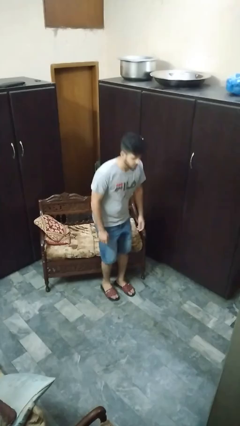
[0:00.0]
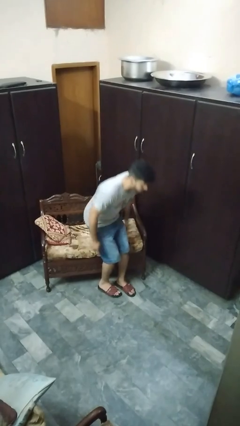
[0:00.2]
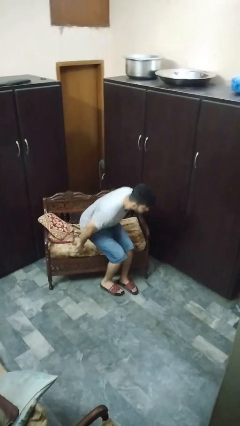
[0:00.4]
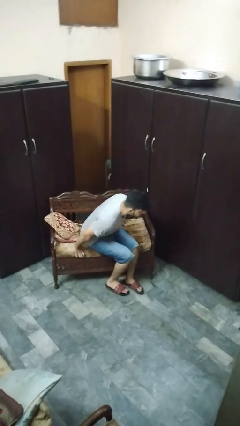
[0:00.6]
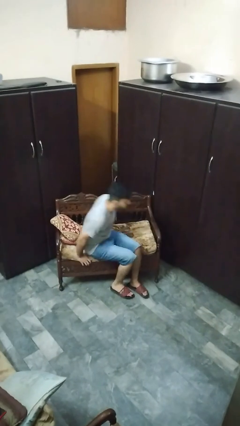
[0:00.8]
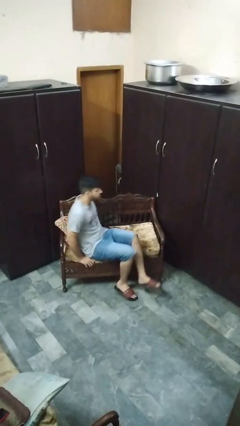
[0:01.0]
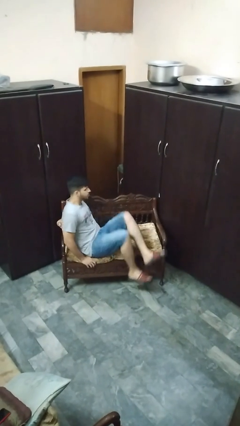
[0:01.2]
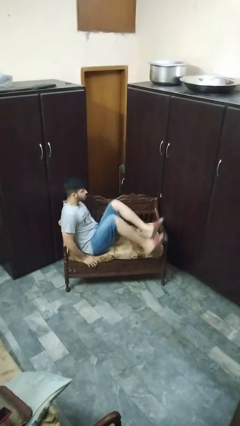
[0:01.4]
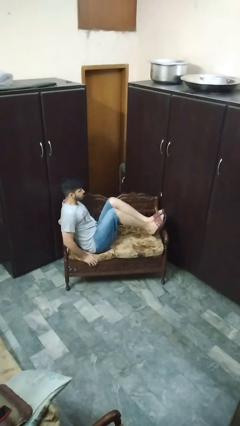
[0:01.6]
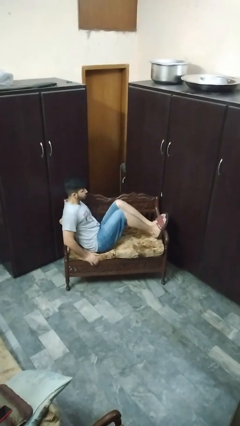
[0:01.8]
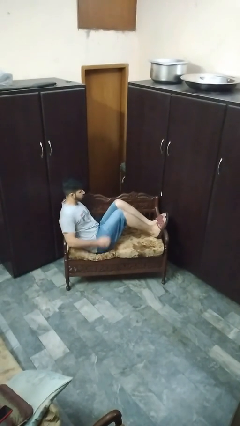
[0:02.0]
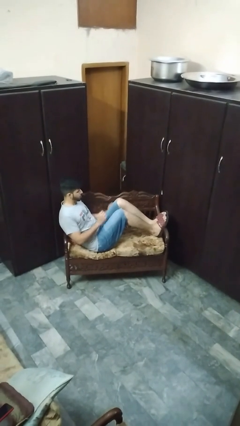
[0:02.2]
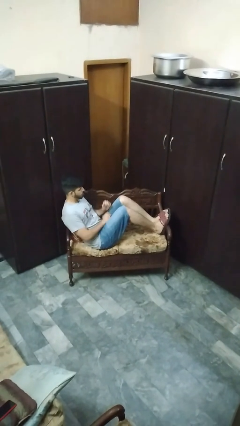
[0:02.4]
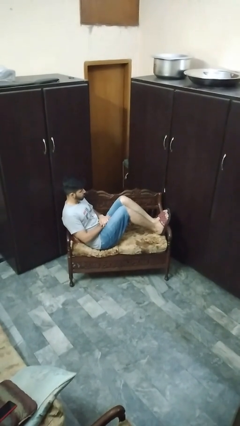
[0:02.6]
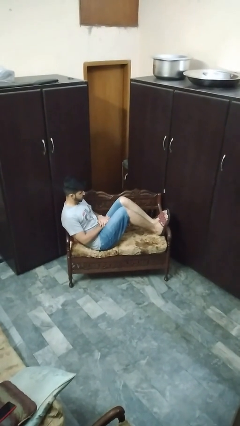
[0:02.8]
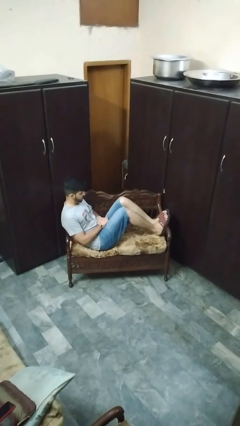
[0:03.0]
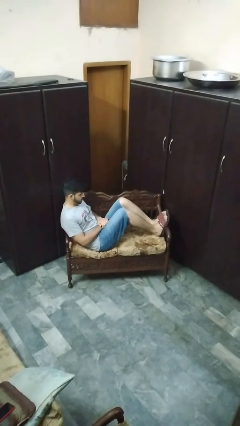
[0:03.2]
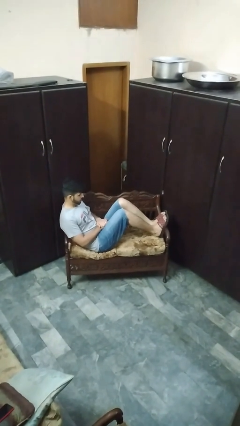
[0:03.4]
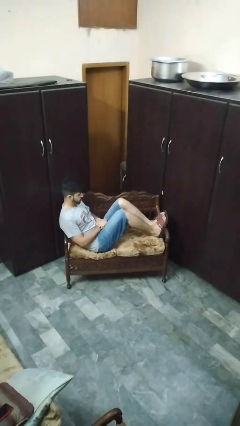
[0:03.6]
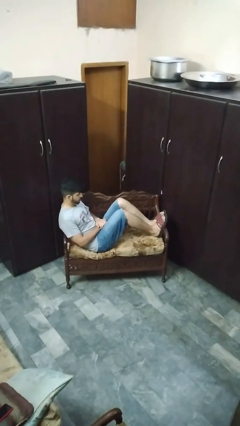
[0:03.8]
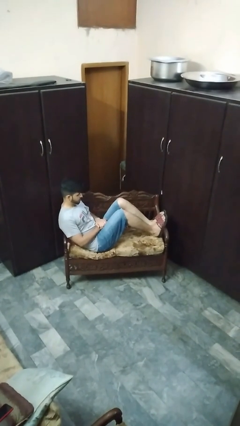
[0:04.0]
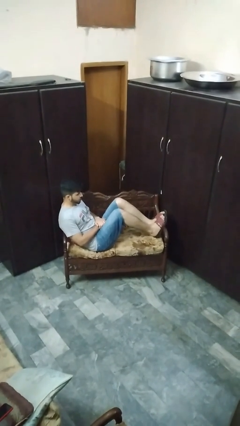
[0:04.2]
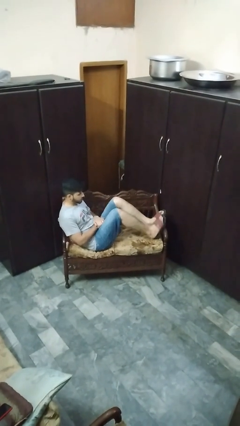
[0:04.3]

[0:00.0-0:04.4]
person lies down on couch

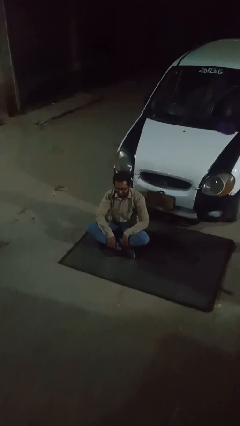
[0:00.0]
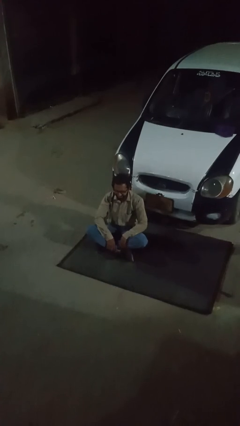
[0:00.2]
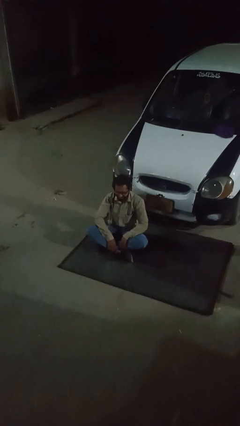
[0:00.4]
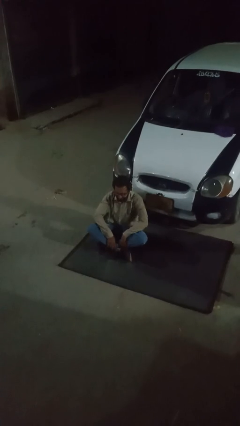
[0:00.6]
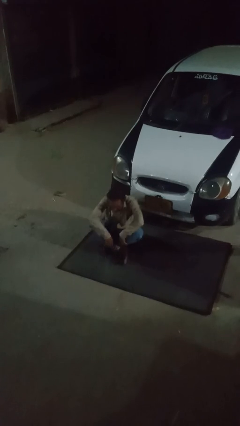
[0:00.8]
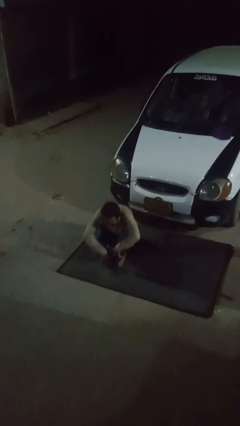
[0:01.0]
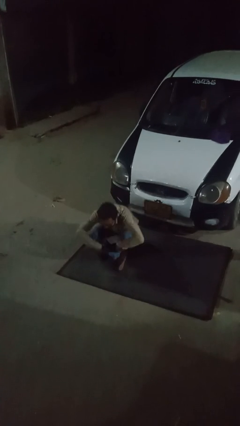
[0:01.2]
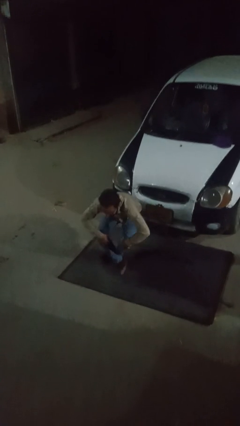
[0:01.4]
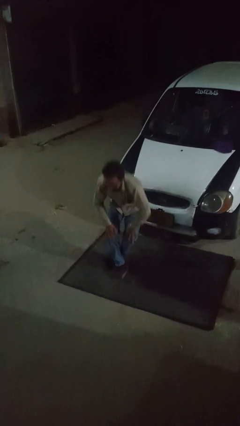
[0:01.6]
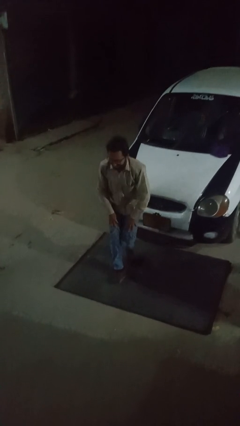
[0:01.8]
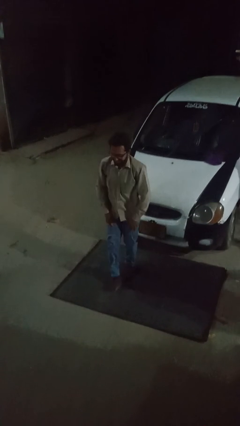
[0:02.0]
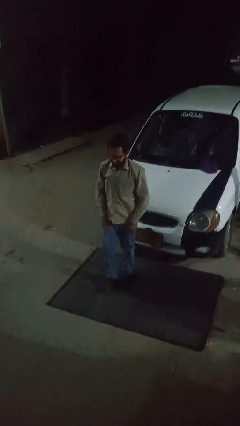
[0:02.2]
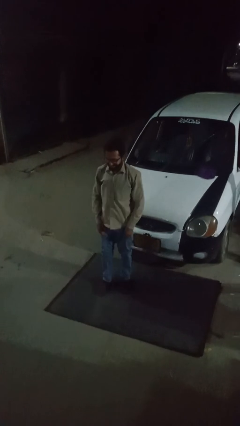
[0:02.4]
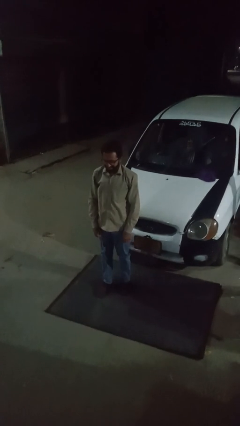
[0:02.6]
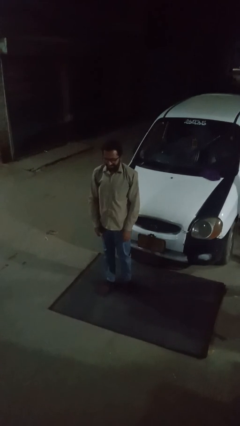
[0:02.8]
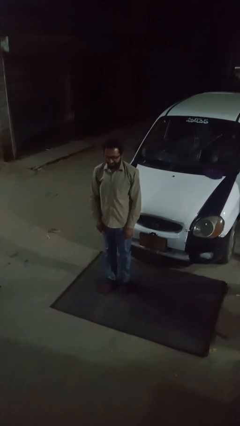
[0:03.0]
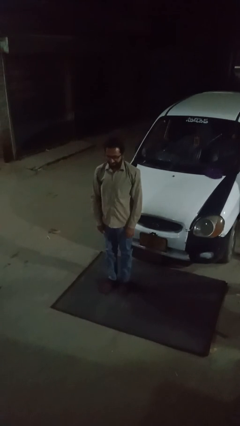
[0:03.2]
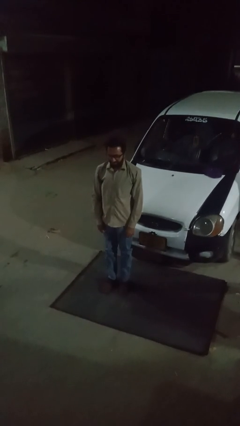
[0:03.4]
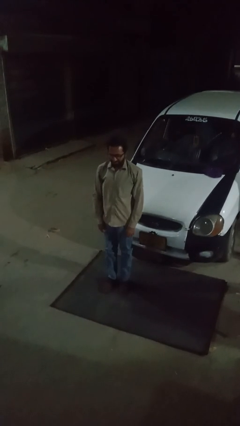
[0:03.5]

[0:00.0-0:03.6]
person stands up from floor

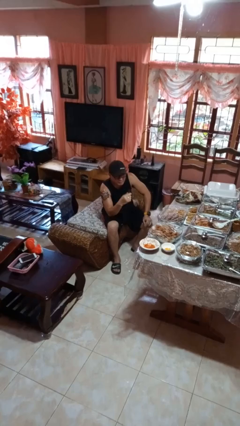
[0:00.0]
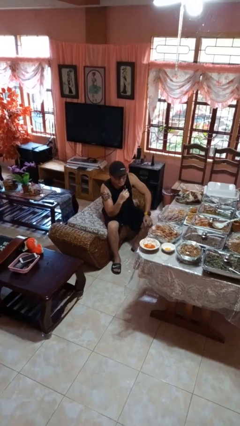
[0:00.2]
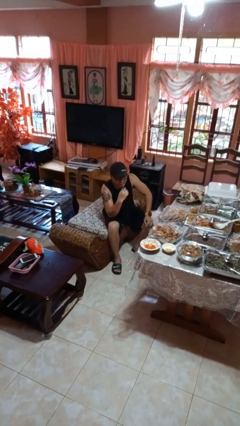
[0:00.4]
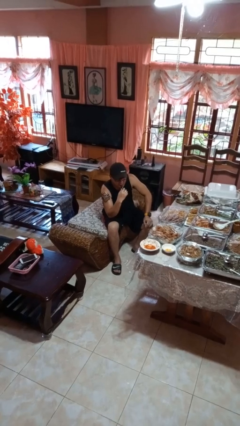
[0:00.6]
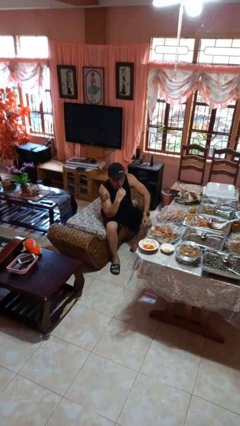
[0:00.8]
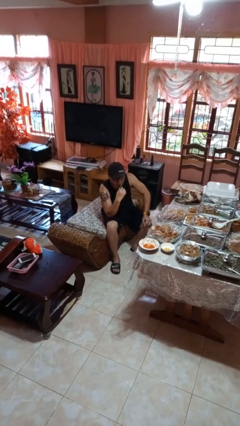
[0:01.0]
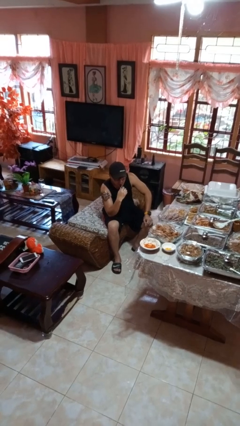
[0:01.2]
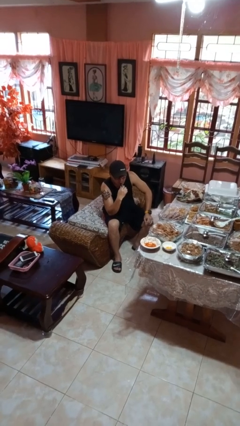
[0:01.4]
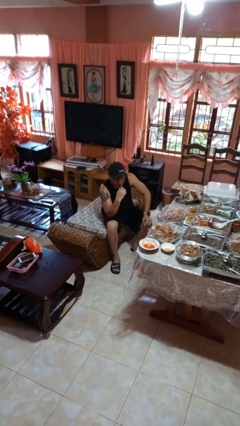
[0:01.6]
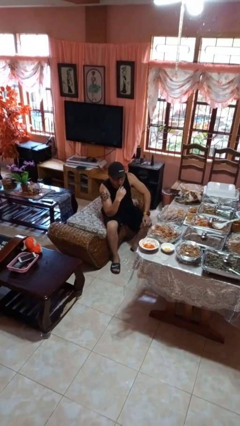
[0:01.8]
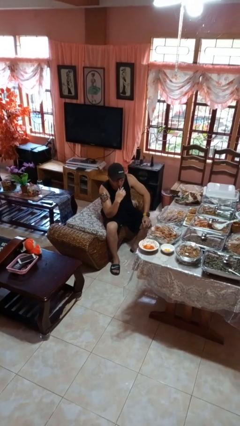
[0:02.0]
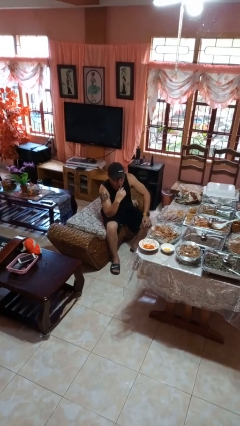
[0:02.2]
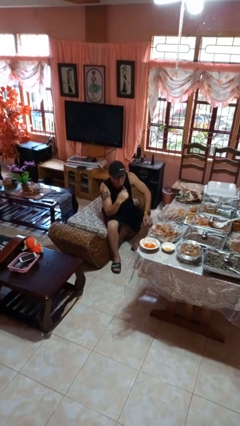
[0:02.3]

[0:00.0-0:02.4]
person vapes

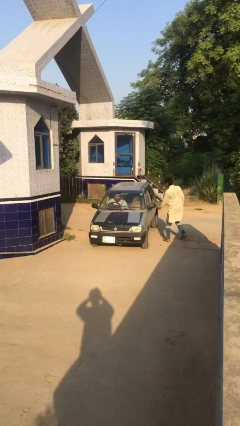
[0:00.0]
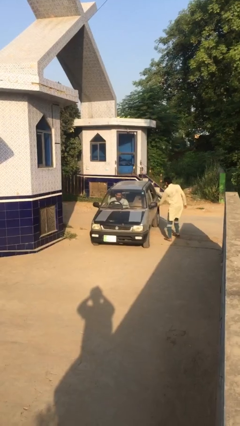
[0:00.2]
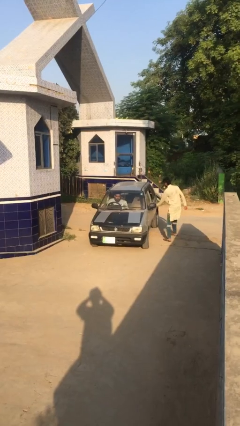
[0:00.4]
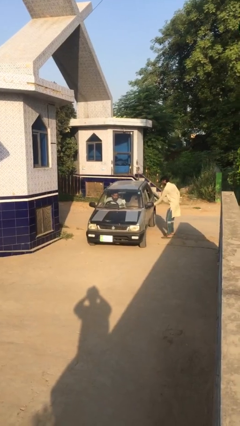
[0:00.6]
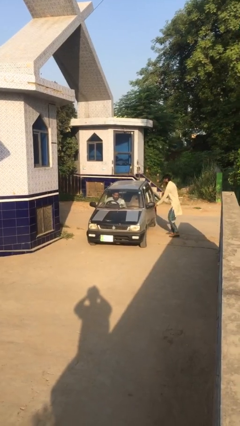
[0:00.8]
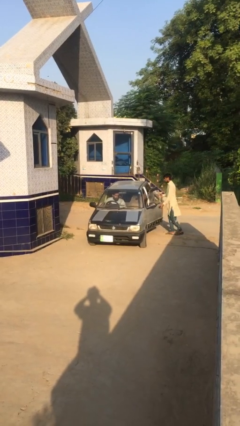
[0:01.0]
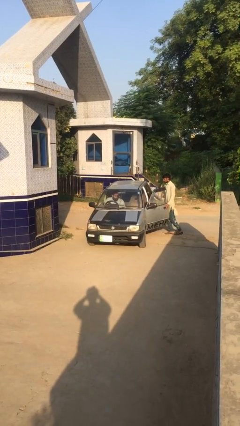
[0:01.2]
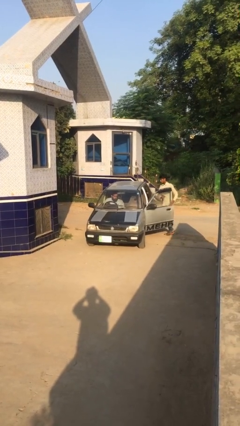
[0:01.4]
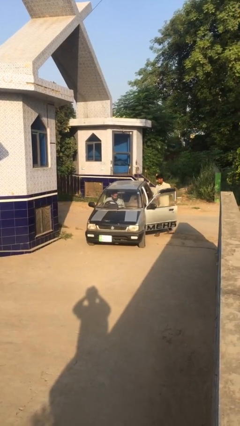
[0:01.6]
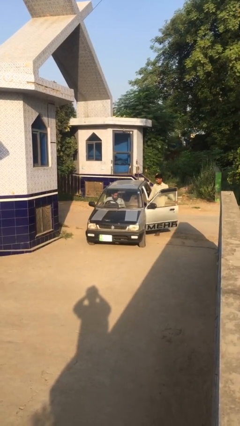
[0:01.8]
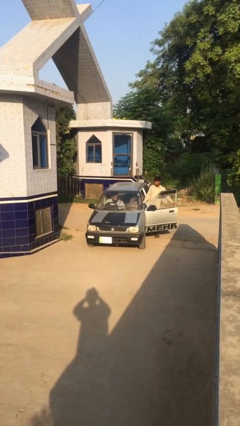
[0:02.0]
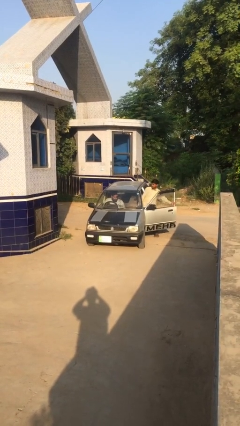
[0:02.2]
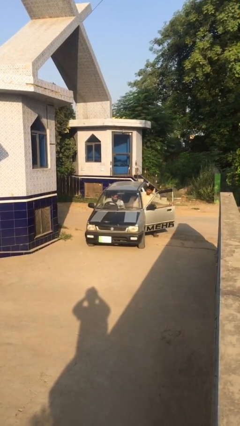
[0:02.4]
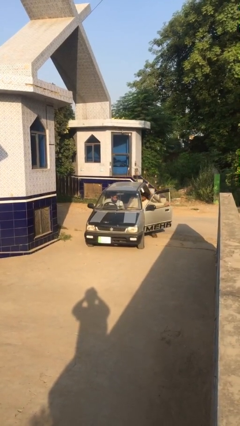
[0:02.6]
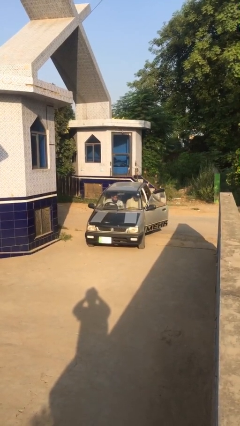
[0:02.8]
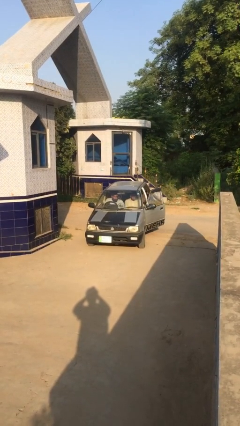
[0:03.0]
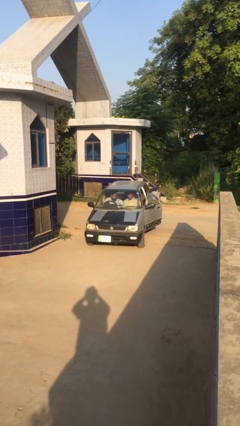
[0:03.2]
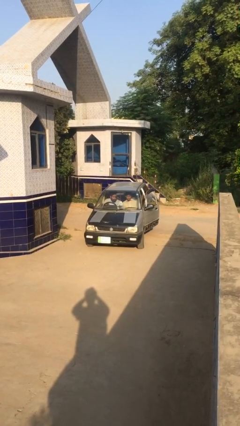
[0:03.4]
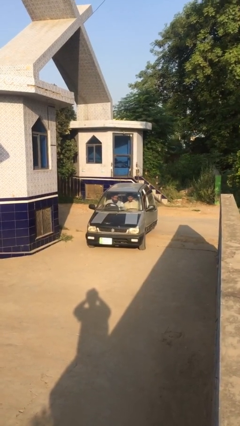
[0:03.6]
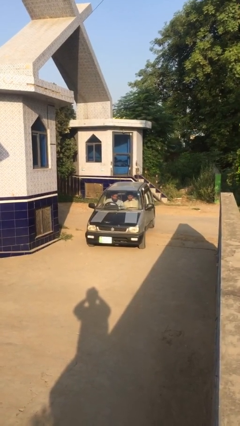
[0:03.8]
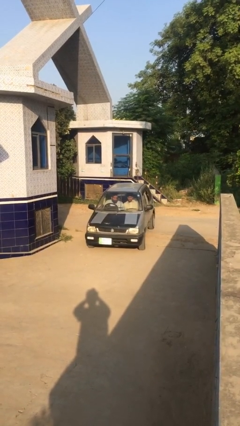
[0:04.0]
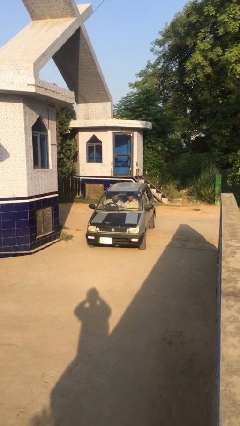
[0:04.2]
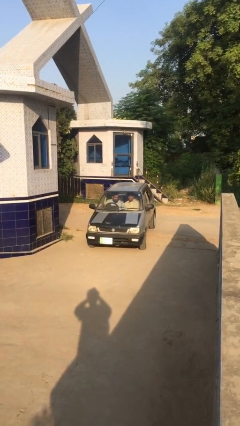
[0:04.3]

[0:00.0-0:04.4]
car picks up person

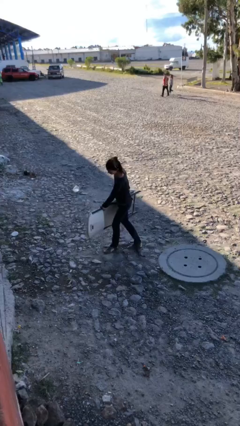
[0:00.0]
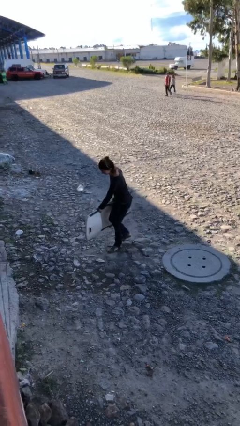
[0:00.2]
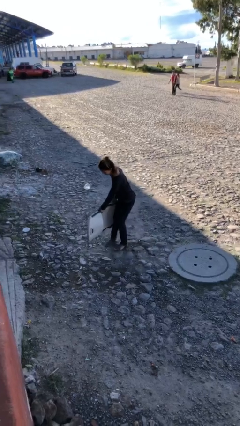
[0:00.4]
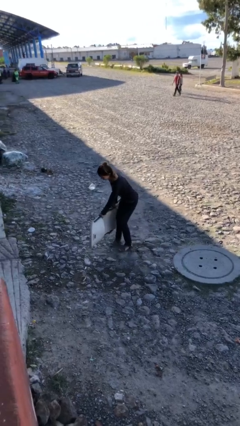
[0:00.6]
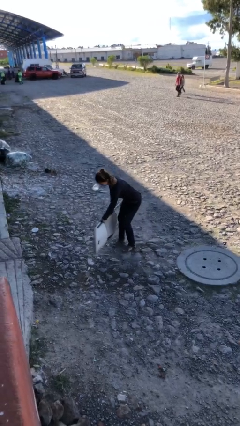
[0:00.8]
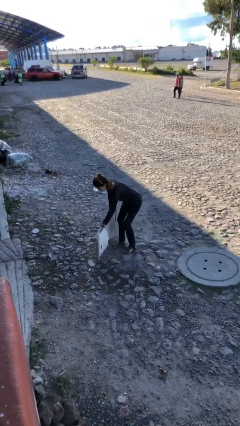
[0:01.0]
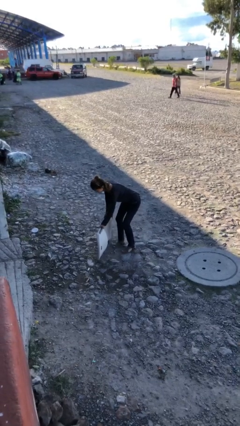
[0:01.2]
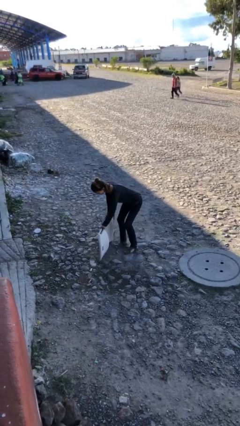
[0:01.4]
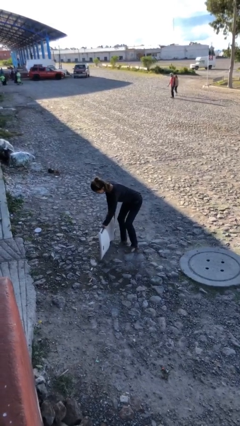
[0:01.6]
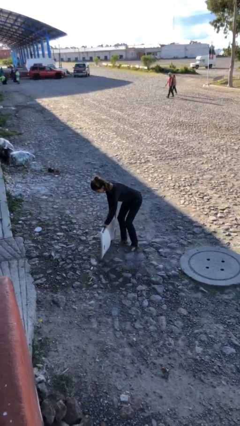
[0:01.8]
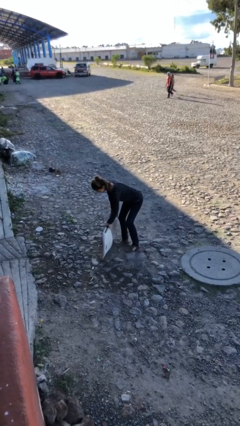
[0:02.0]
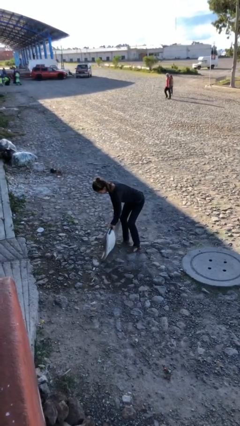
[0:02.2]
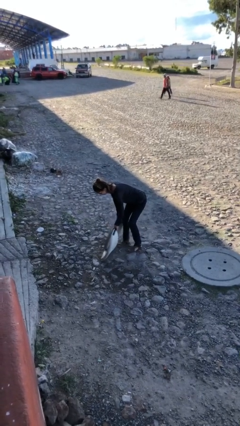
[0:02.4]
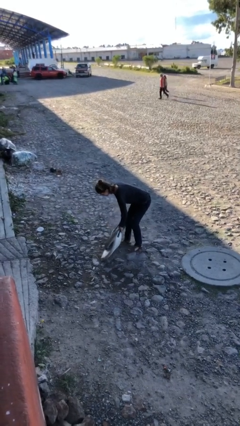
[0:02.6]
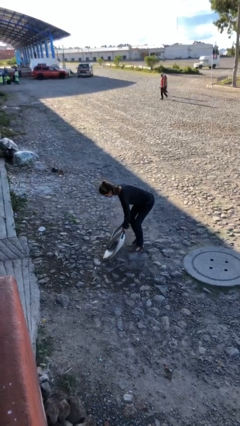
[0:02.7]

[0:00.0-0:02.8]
person puts down object on floor

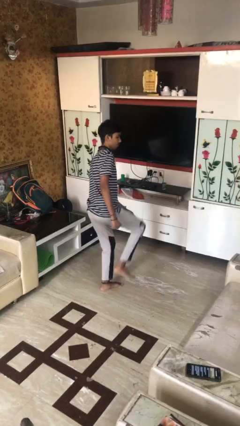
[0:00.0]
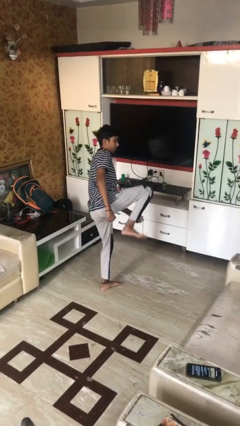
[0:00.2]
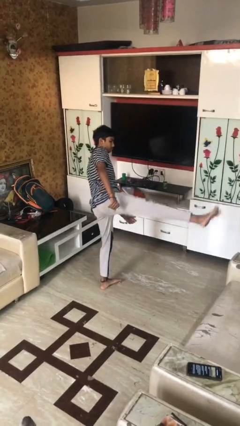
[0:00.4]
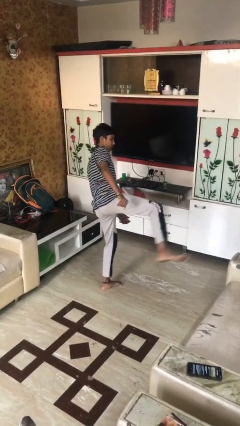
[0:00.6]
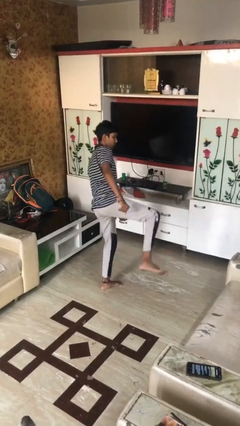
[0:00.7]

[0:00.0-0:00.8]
person karate kicks
